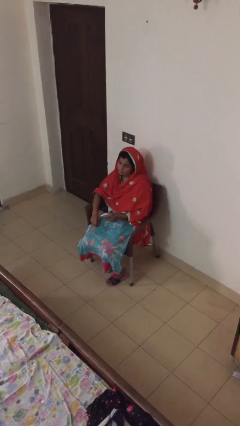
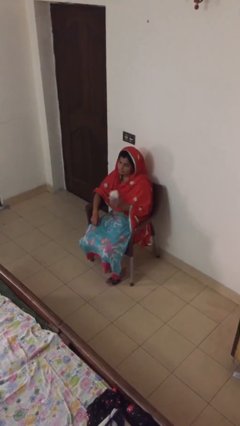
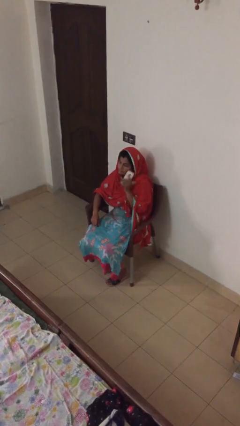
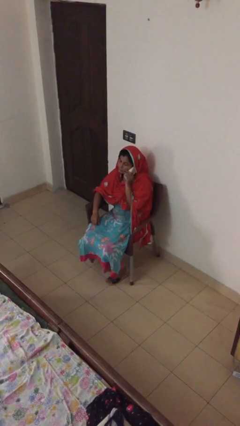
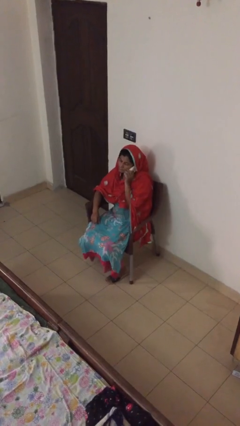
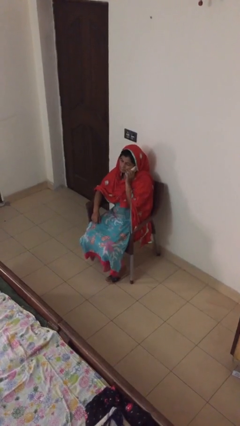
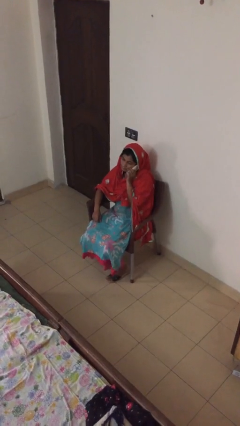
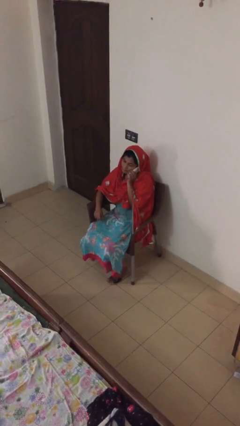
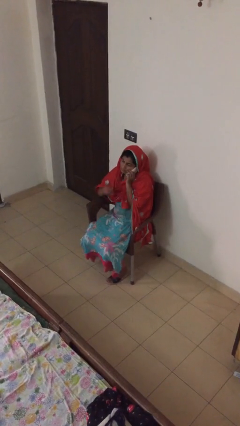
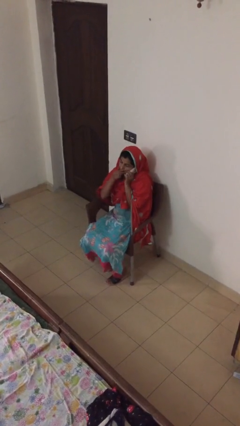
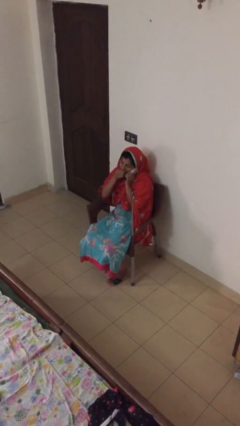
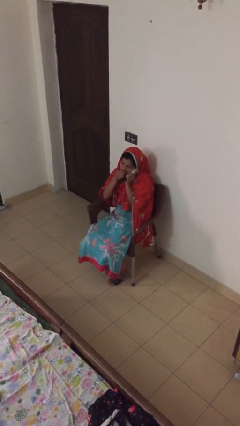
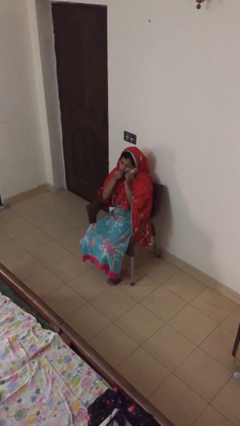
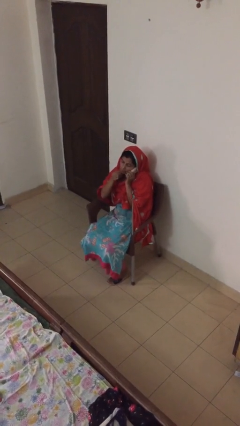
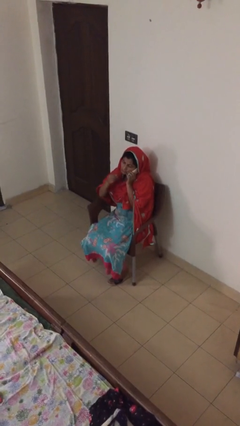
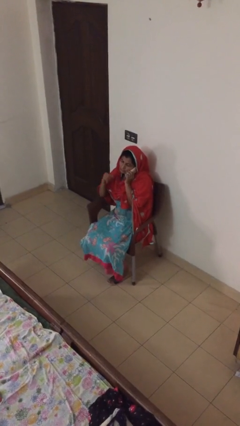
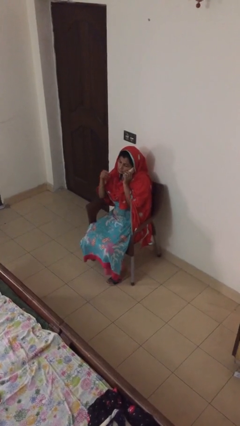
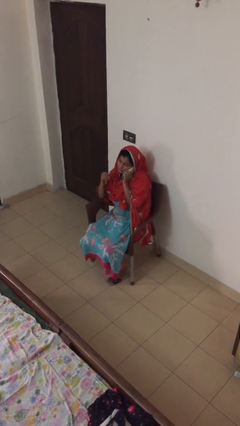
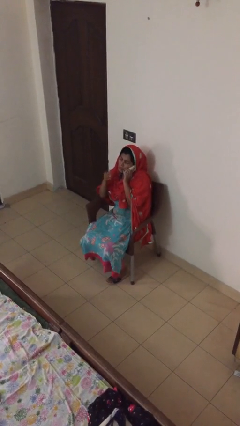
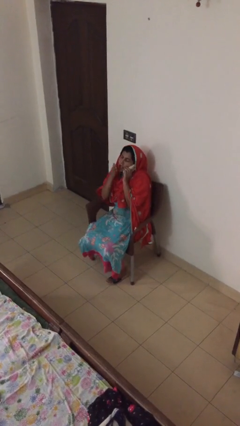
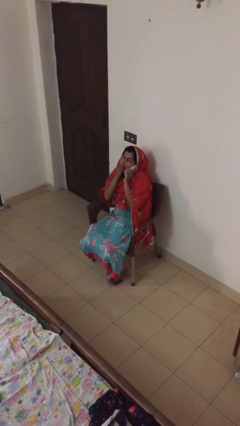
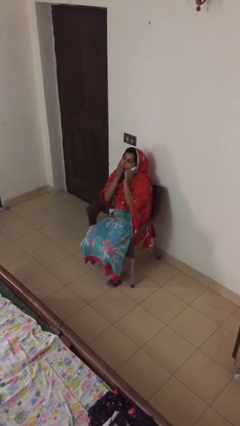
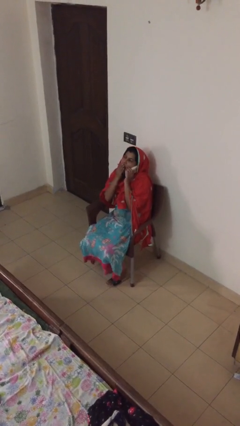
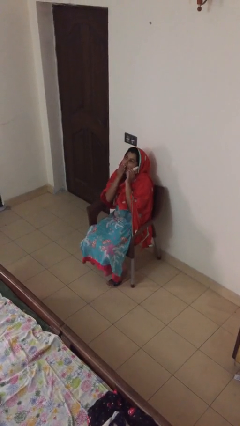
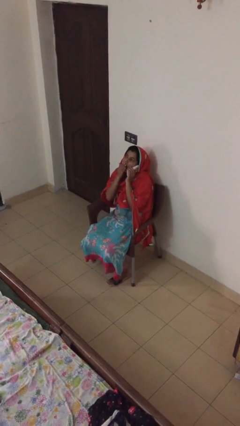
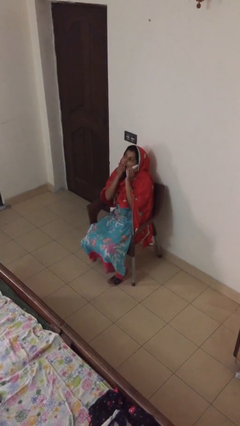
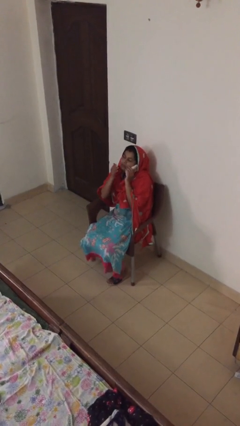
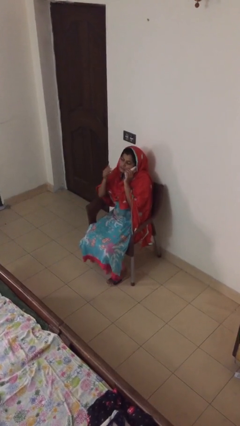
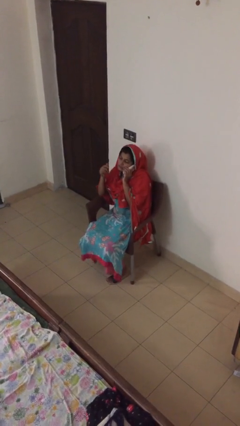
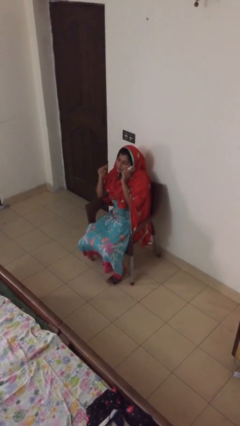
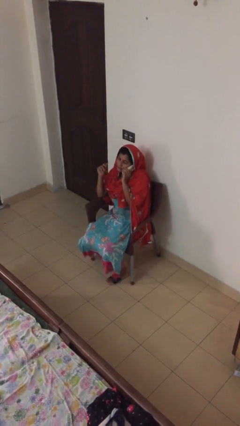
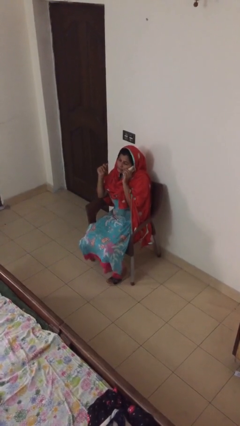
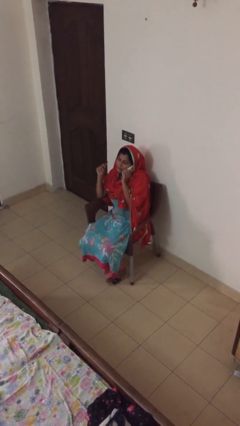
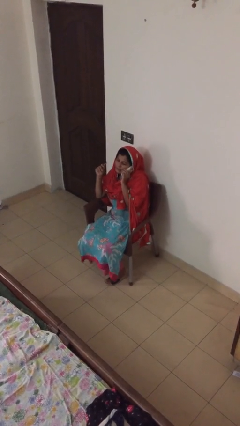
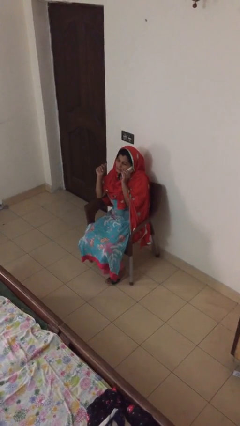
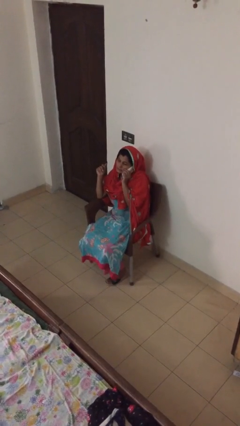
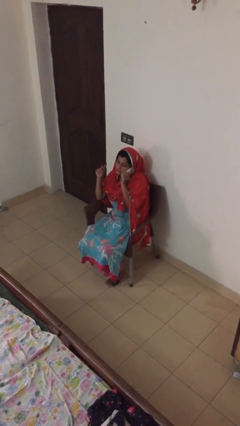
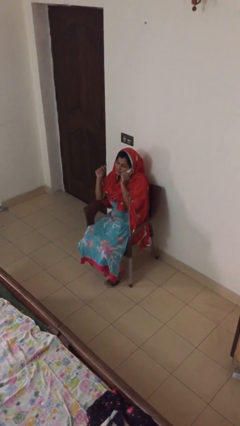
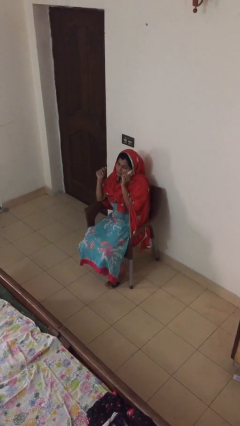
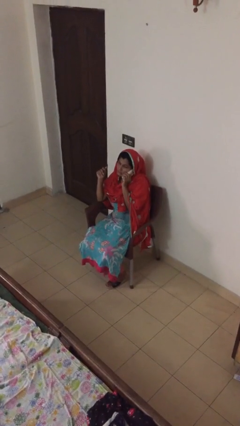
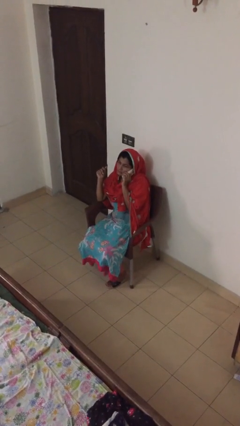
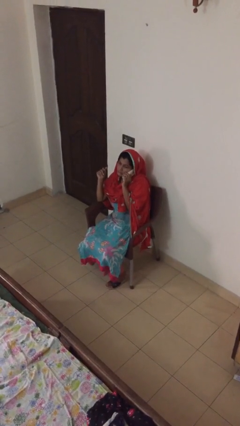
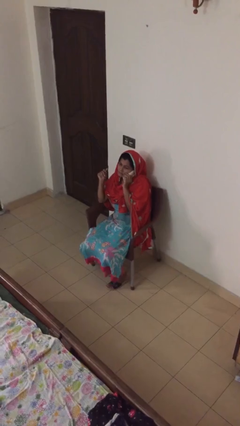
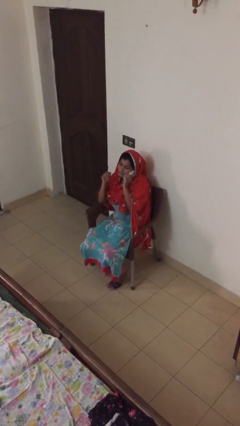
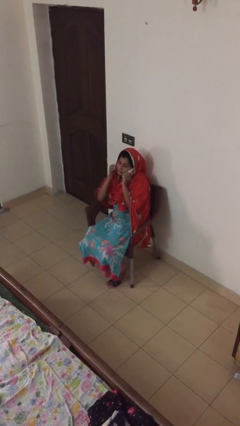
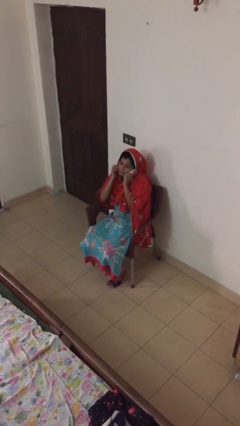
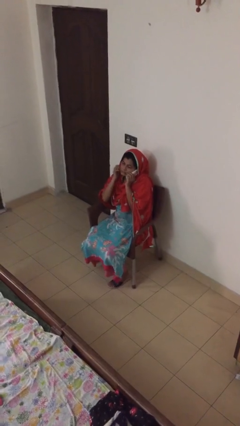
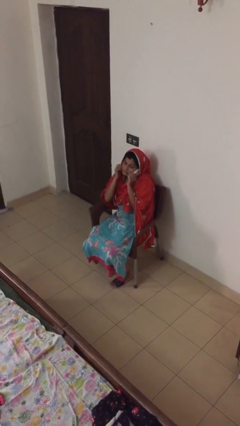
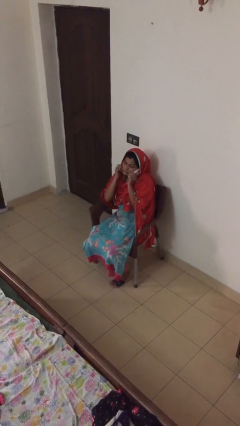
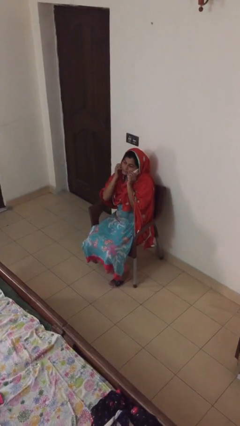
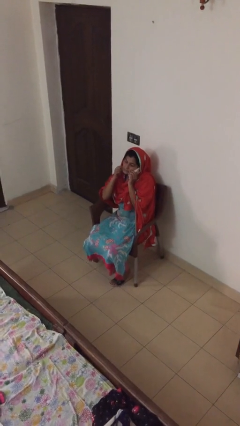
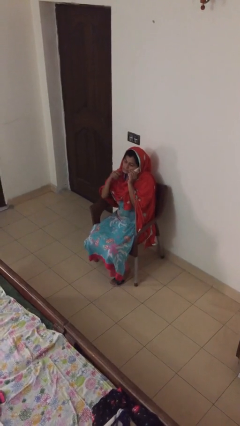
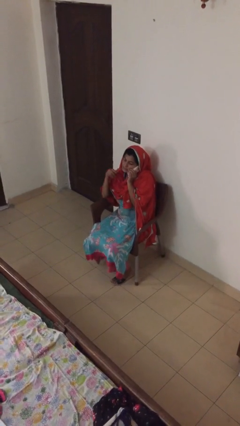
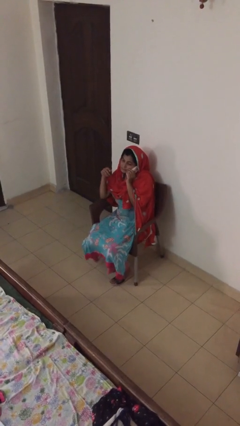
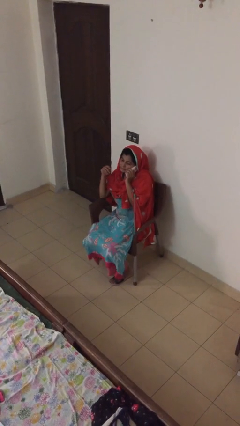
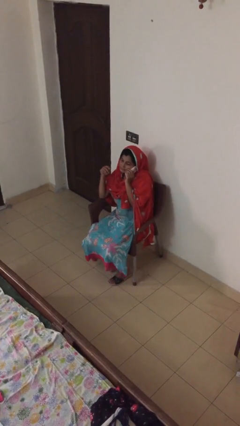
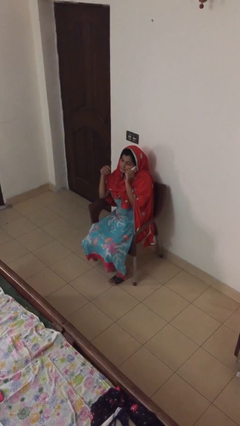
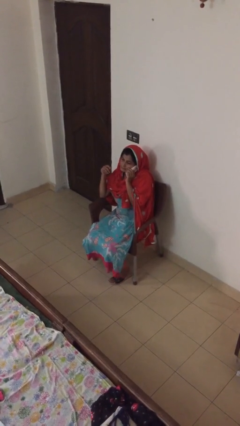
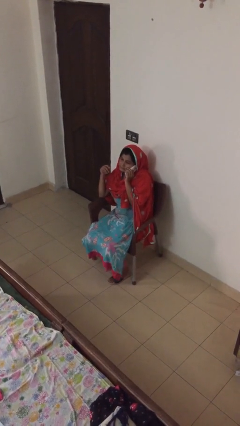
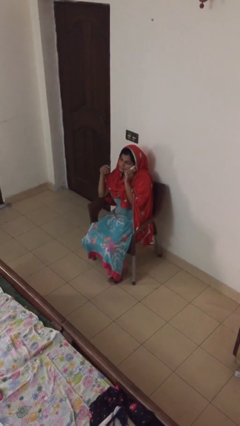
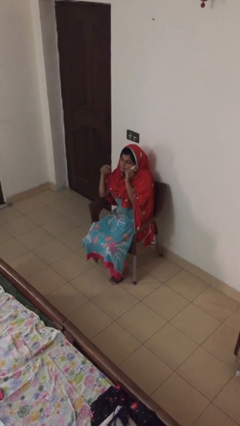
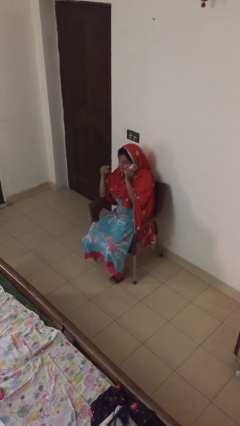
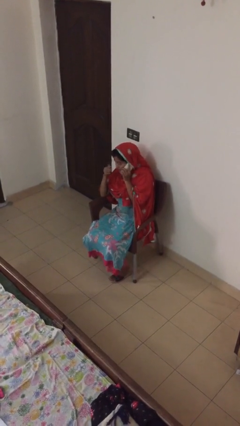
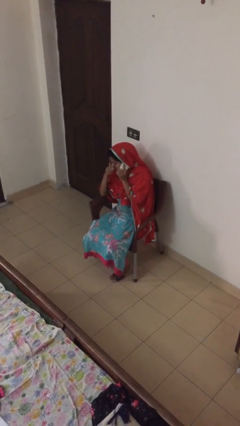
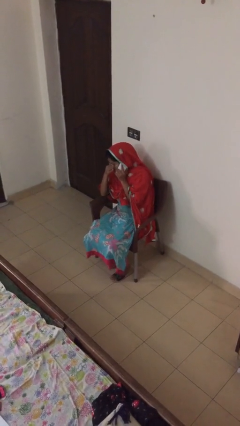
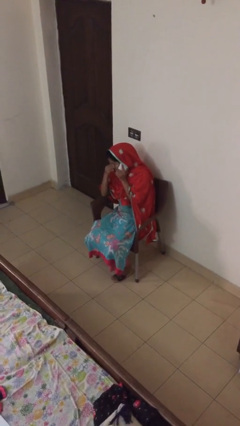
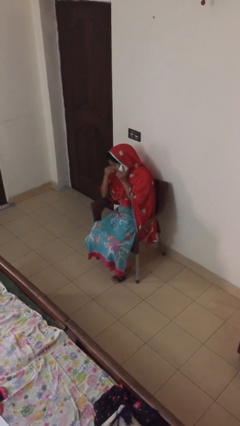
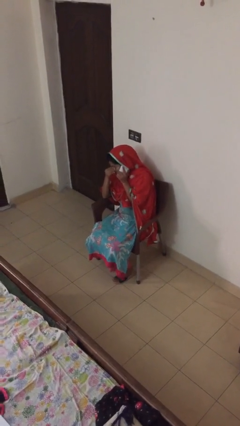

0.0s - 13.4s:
person talks on phone

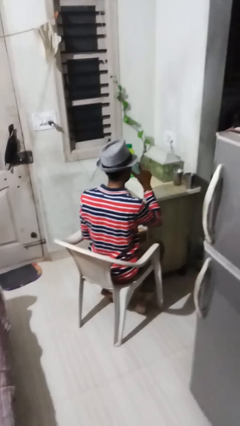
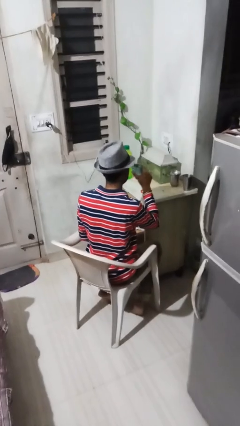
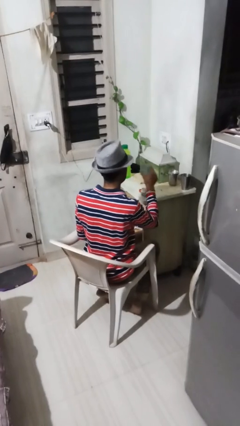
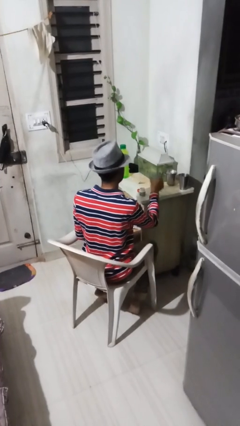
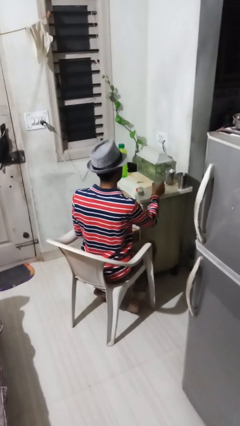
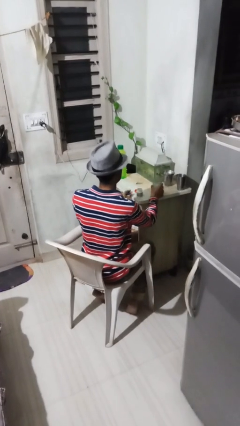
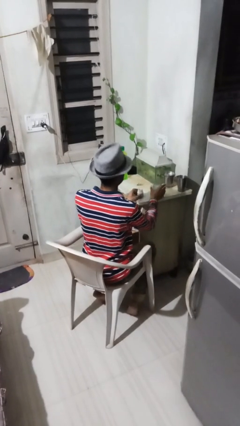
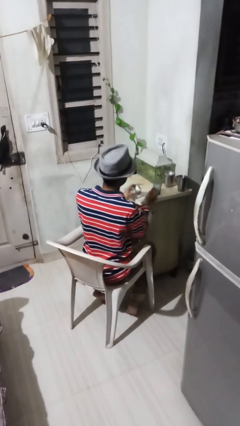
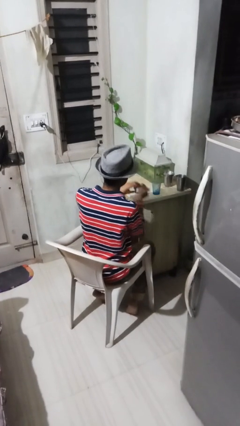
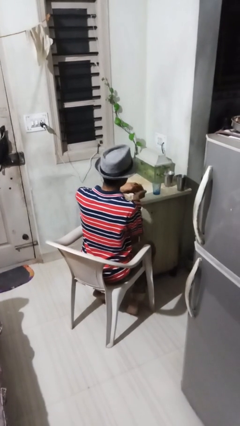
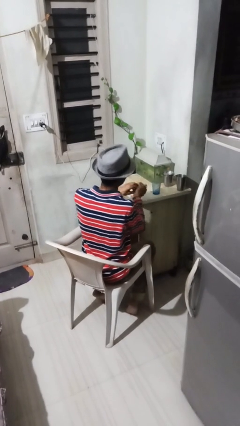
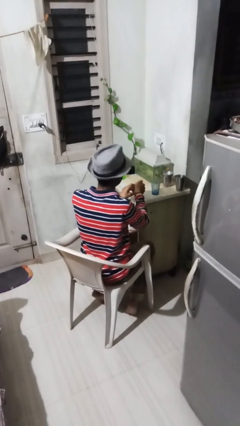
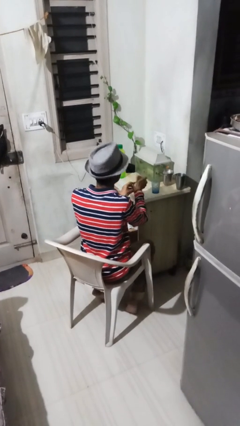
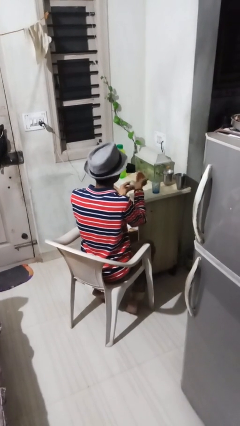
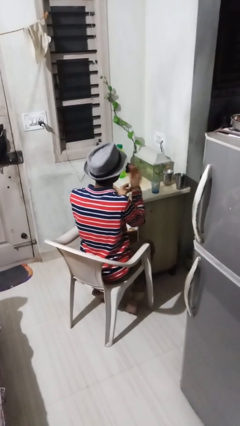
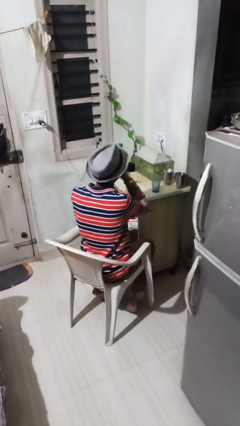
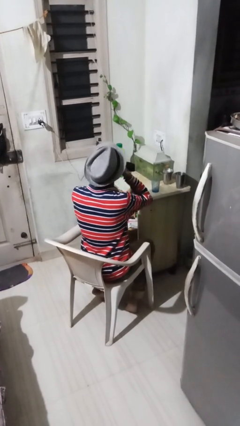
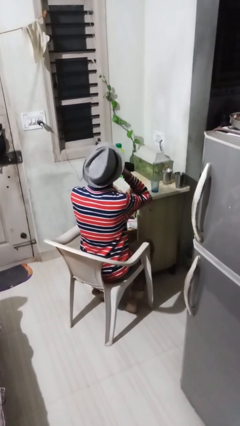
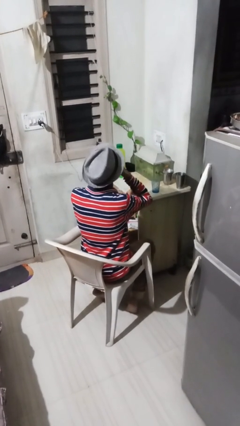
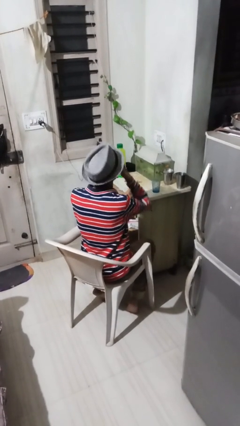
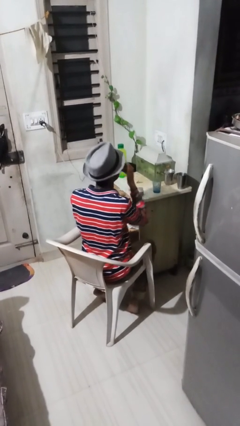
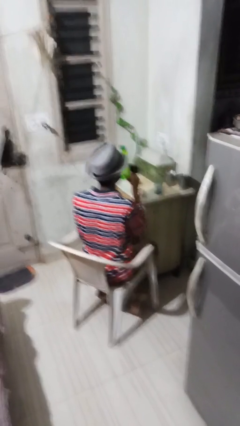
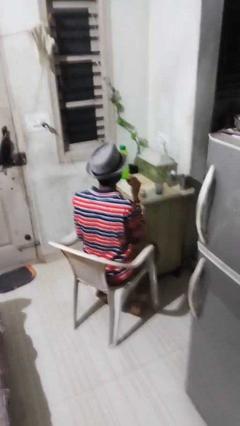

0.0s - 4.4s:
person takes medicine pills
